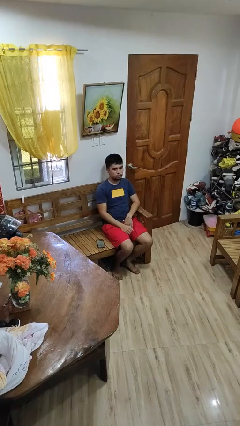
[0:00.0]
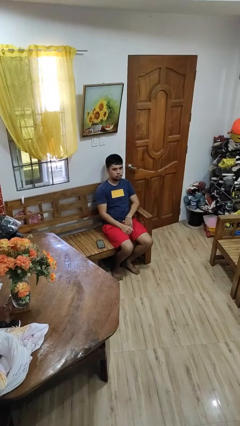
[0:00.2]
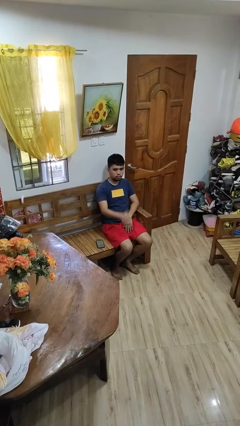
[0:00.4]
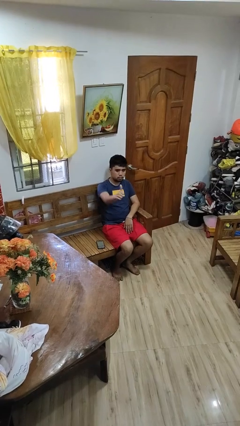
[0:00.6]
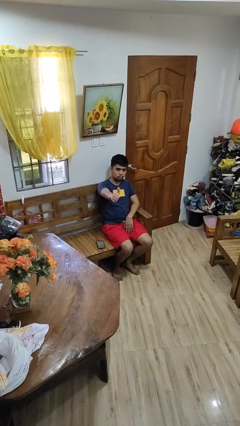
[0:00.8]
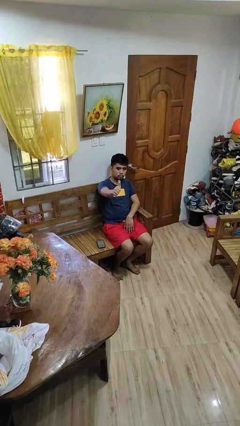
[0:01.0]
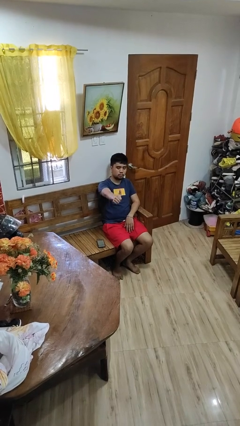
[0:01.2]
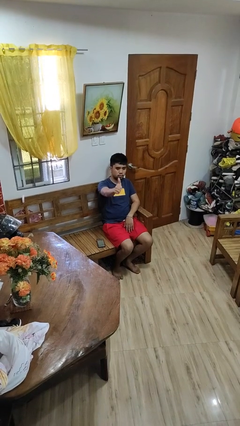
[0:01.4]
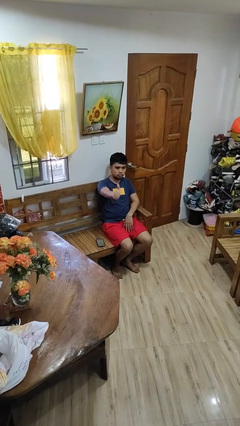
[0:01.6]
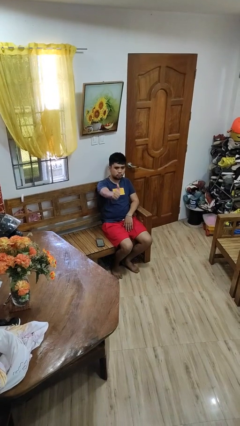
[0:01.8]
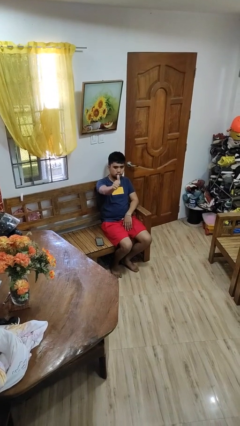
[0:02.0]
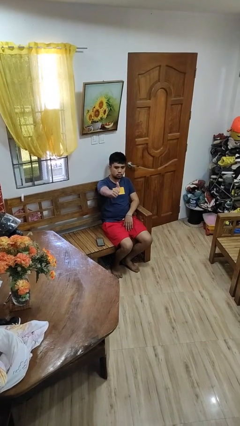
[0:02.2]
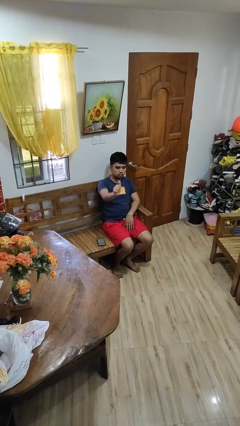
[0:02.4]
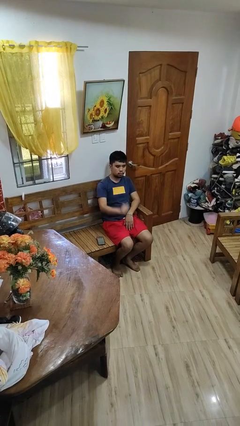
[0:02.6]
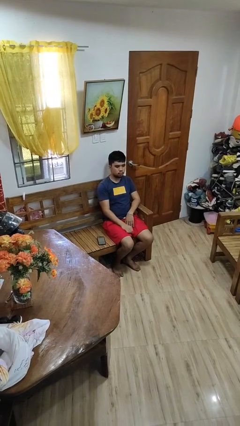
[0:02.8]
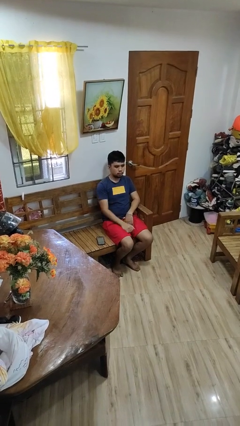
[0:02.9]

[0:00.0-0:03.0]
person gestures thumbs up

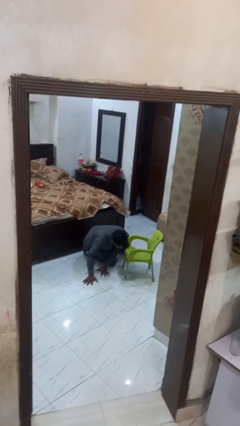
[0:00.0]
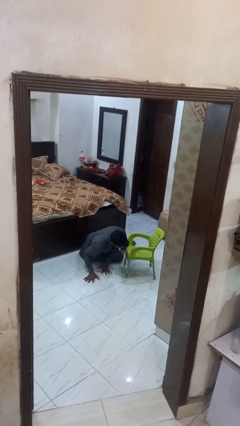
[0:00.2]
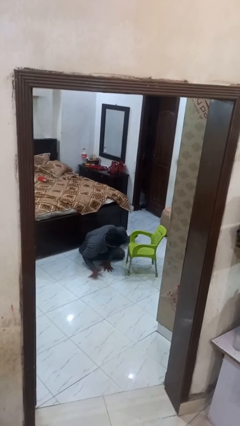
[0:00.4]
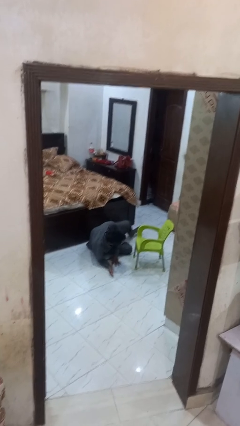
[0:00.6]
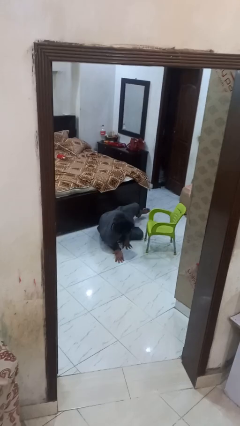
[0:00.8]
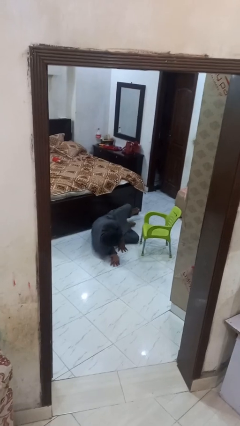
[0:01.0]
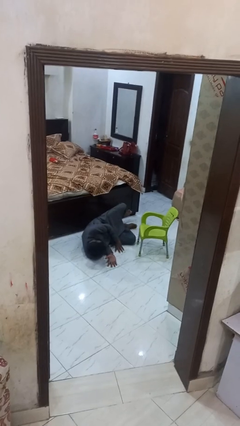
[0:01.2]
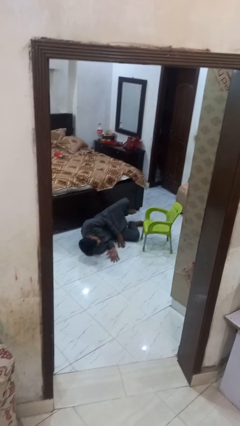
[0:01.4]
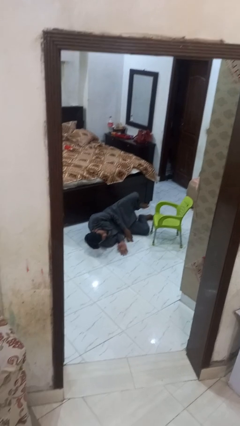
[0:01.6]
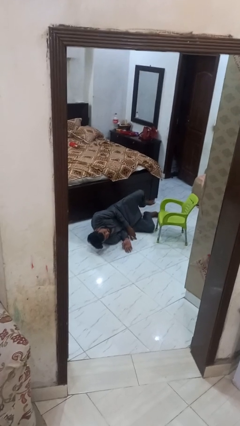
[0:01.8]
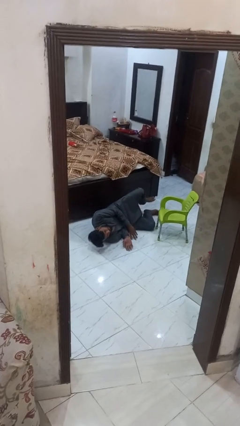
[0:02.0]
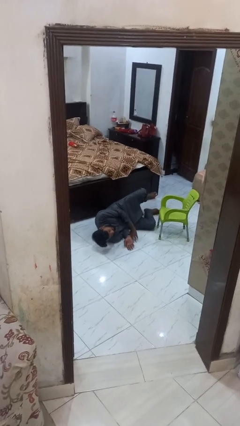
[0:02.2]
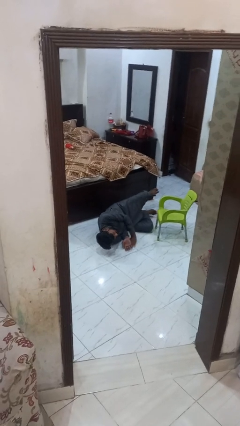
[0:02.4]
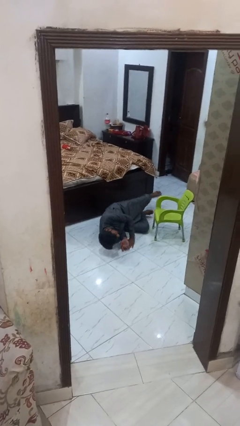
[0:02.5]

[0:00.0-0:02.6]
person lies down on floor

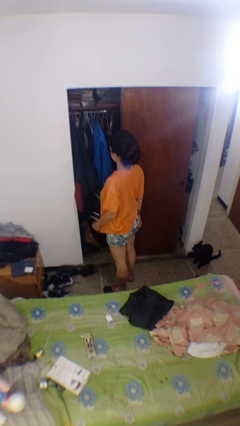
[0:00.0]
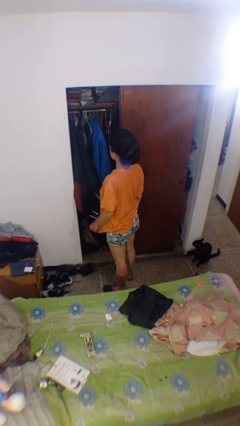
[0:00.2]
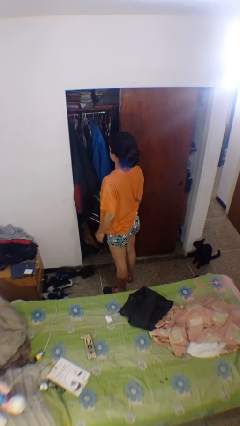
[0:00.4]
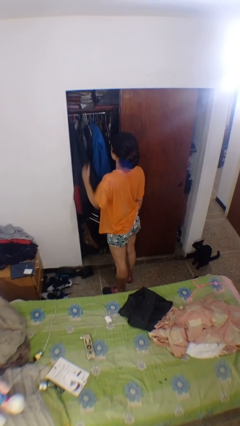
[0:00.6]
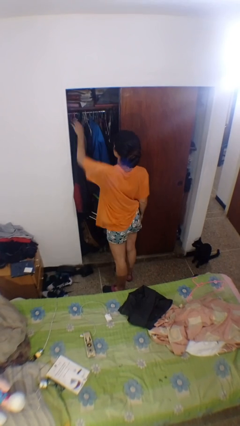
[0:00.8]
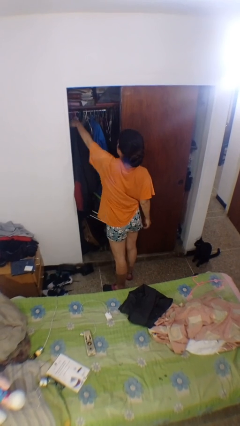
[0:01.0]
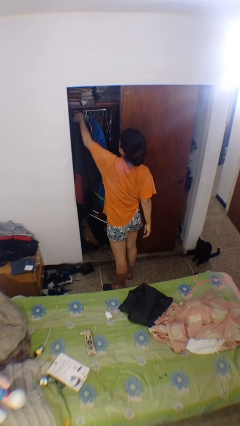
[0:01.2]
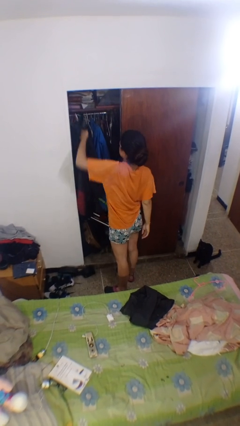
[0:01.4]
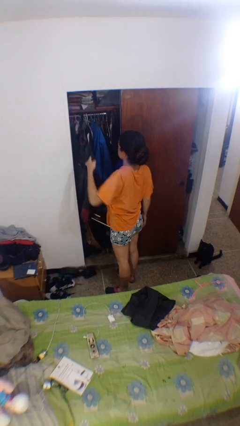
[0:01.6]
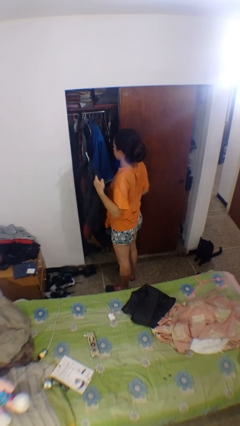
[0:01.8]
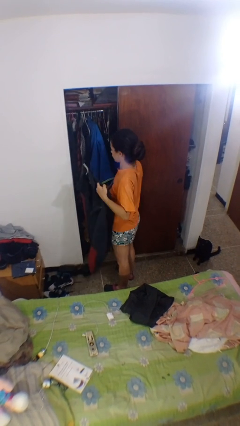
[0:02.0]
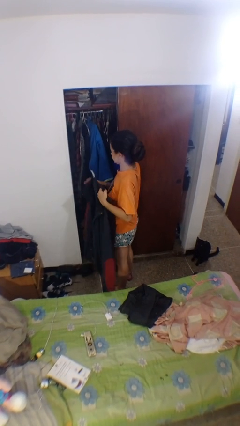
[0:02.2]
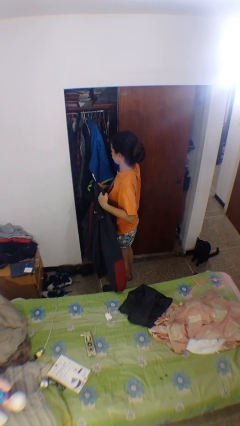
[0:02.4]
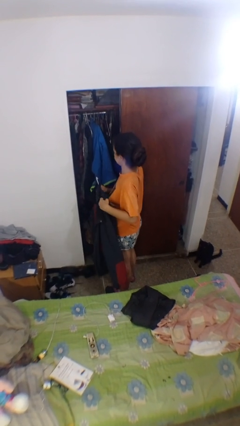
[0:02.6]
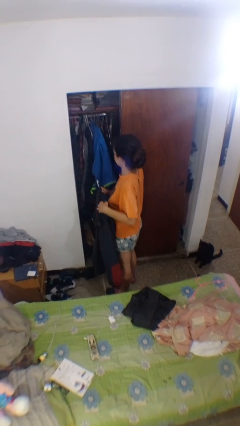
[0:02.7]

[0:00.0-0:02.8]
person takes clothes from closet

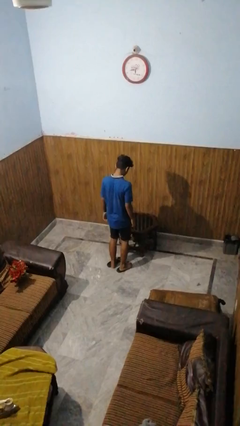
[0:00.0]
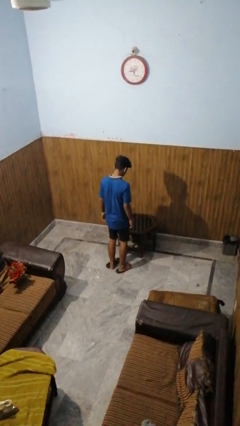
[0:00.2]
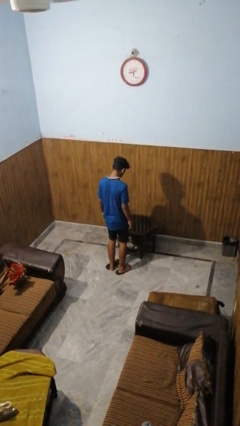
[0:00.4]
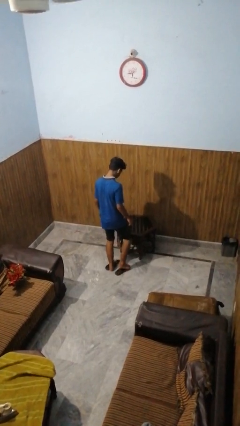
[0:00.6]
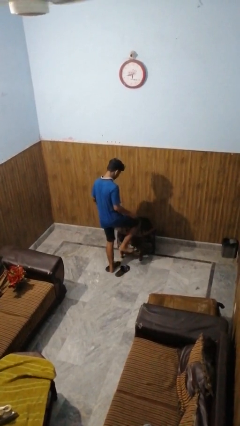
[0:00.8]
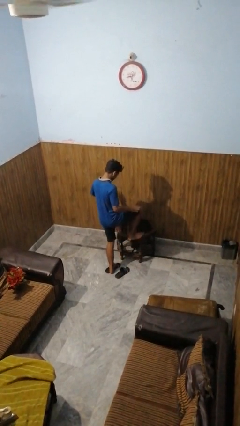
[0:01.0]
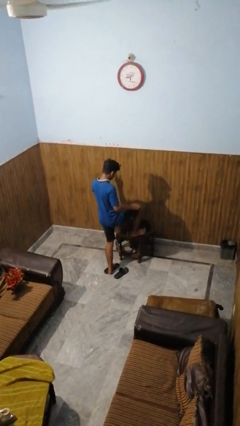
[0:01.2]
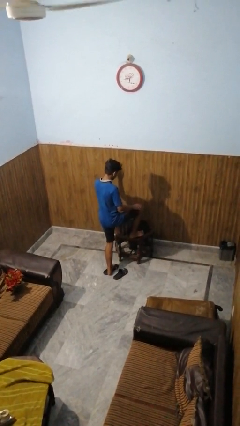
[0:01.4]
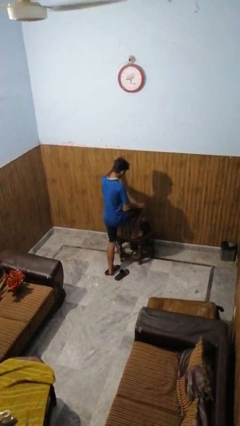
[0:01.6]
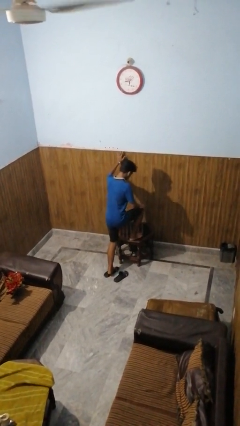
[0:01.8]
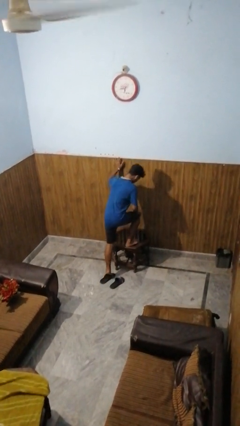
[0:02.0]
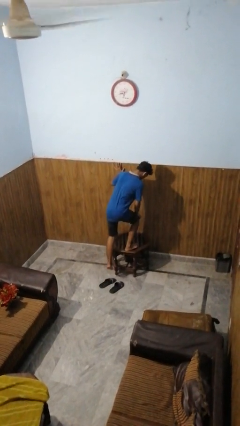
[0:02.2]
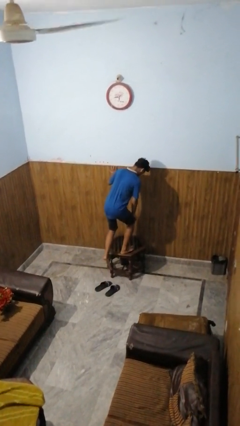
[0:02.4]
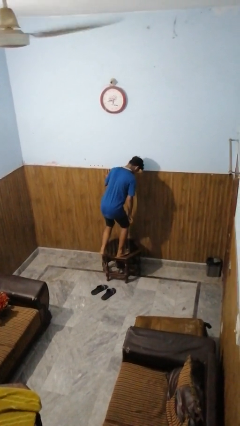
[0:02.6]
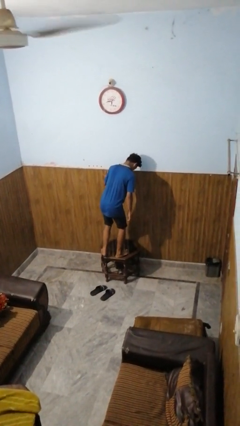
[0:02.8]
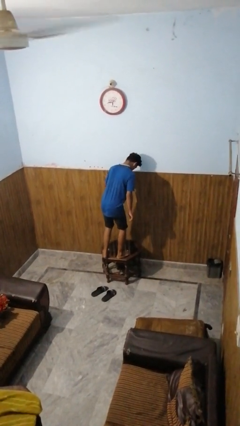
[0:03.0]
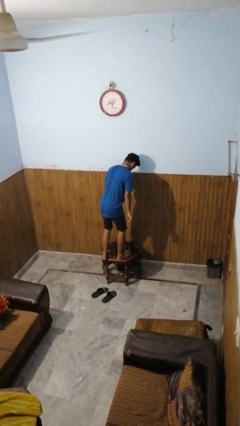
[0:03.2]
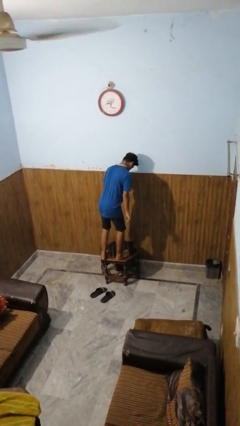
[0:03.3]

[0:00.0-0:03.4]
person climbs on table

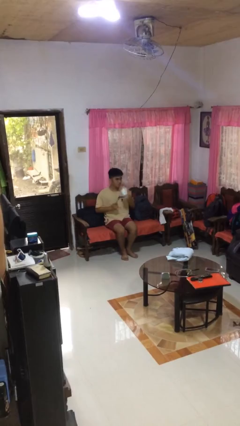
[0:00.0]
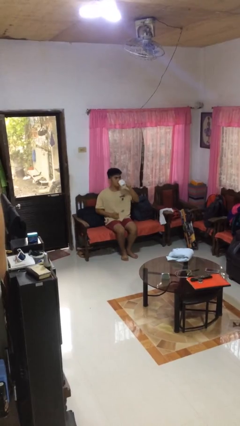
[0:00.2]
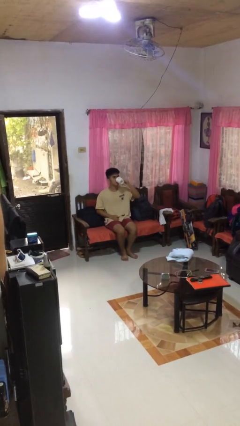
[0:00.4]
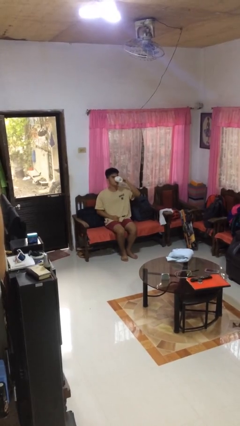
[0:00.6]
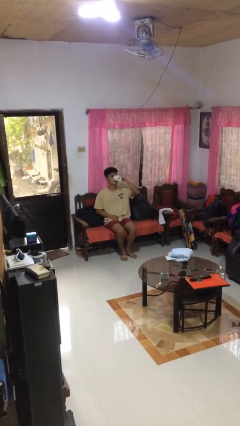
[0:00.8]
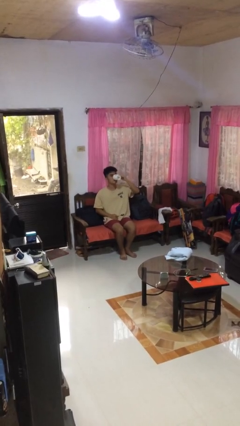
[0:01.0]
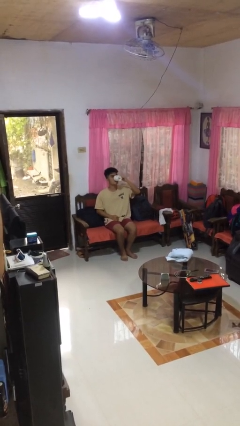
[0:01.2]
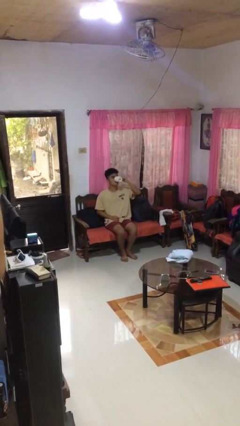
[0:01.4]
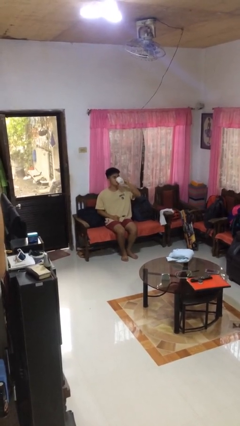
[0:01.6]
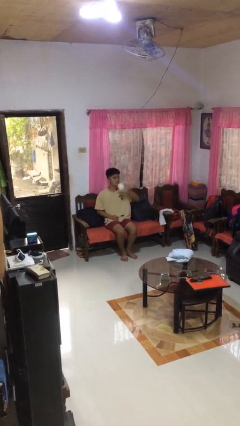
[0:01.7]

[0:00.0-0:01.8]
person drinks from mug

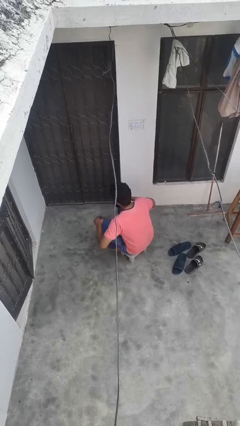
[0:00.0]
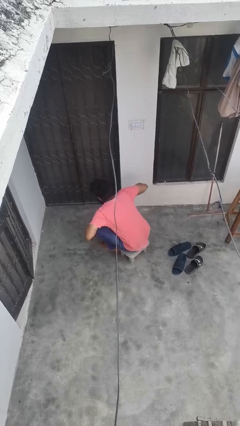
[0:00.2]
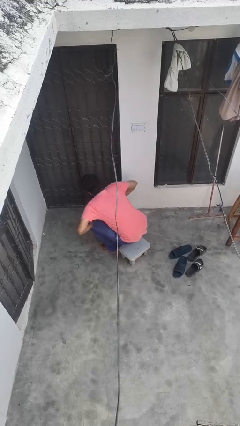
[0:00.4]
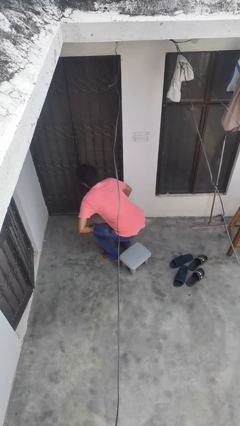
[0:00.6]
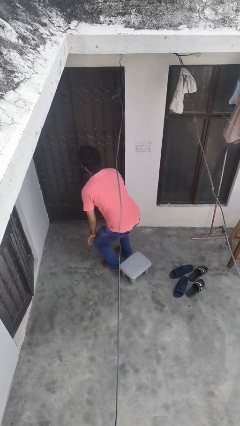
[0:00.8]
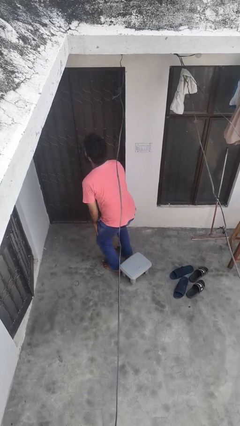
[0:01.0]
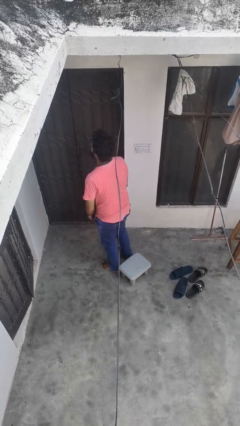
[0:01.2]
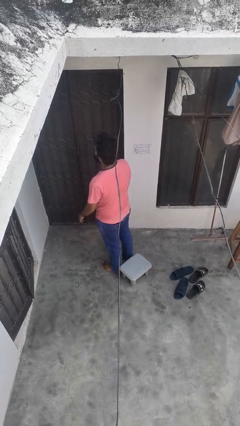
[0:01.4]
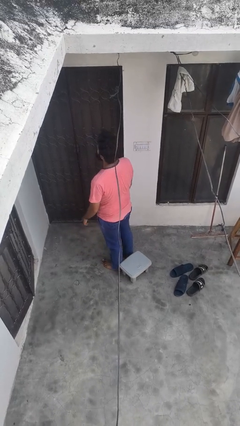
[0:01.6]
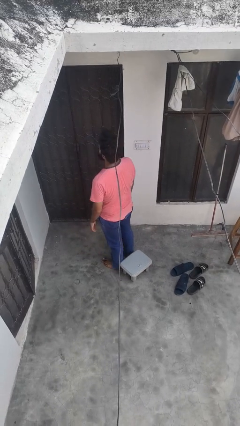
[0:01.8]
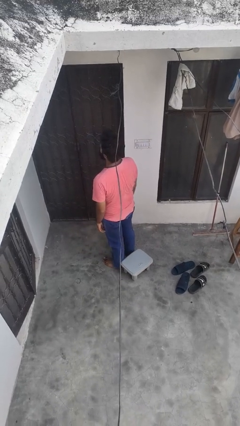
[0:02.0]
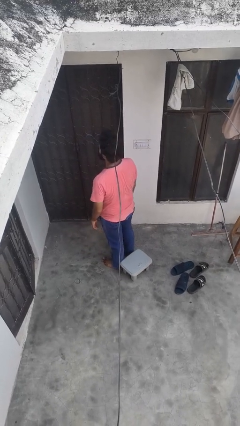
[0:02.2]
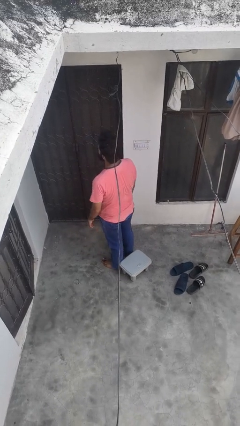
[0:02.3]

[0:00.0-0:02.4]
person stands up from floor

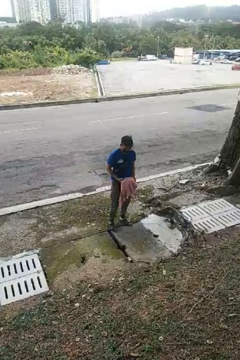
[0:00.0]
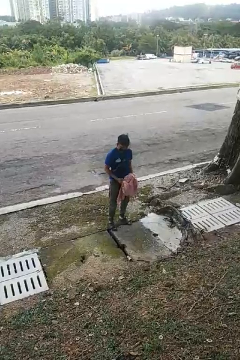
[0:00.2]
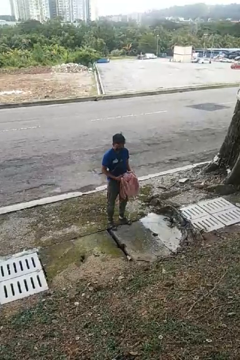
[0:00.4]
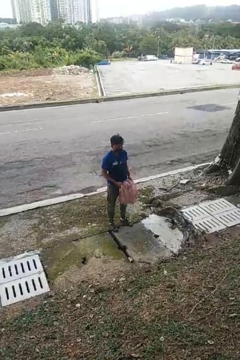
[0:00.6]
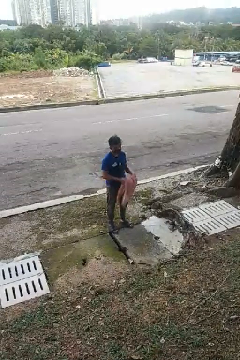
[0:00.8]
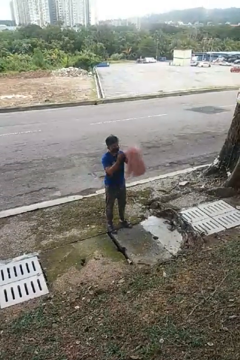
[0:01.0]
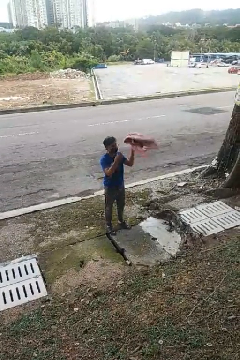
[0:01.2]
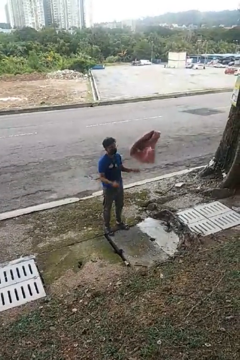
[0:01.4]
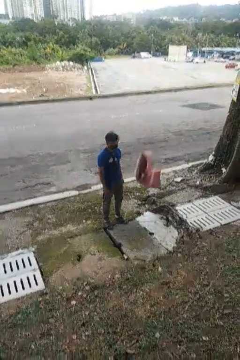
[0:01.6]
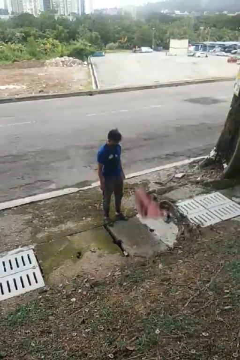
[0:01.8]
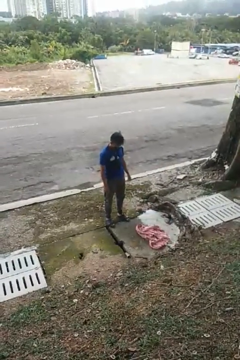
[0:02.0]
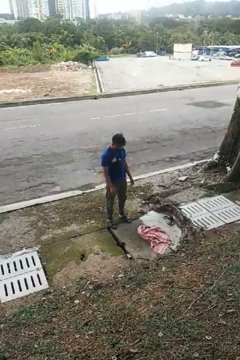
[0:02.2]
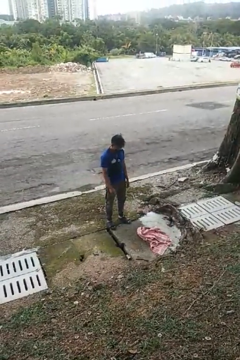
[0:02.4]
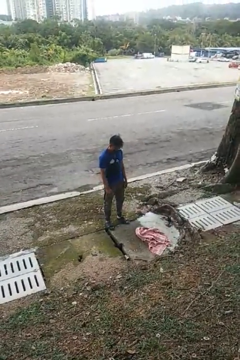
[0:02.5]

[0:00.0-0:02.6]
person throws object into air
